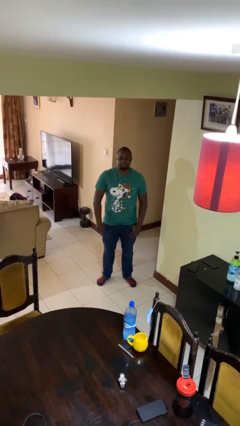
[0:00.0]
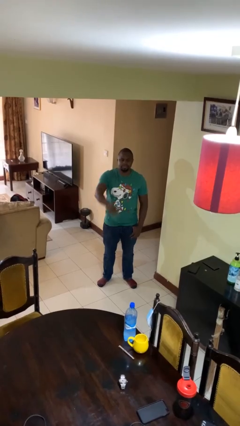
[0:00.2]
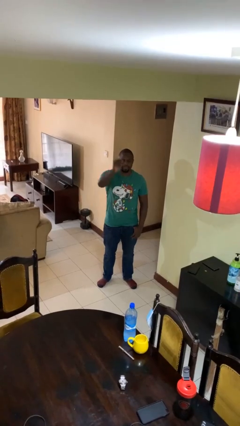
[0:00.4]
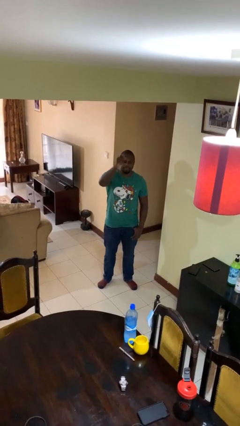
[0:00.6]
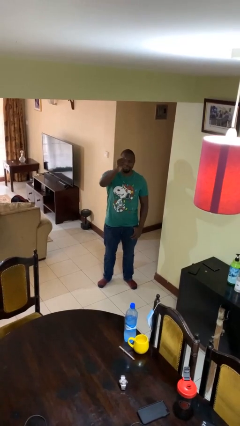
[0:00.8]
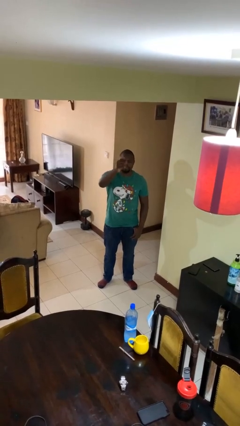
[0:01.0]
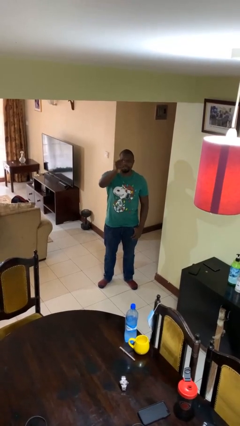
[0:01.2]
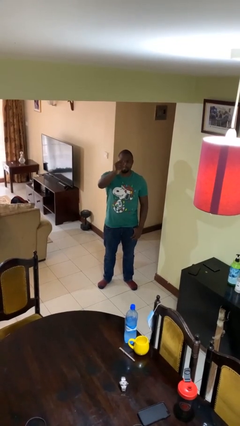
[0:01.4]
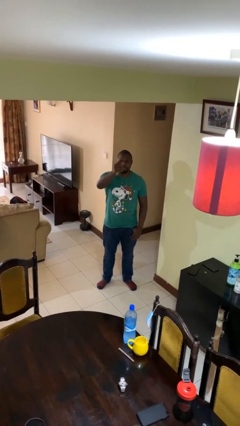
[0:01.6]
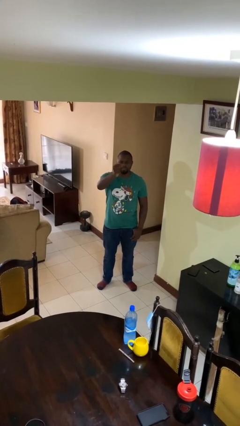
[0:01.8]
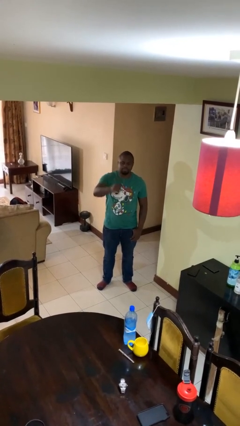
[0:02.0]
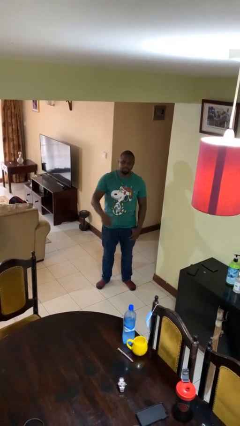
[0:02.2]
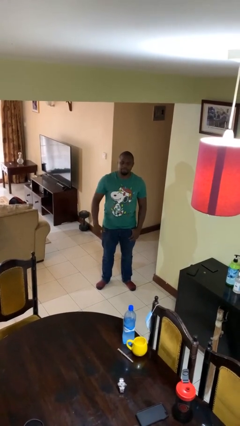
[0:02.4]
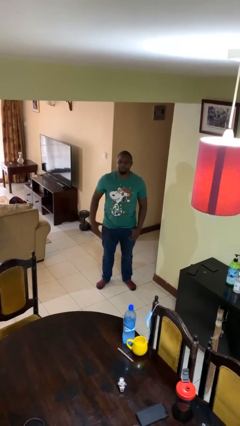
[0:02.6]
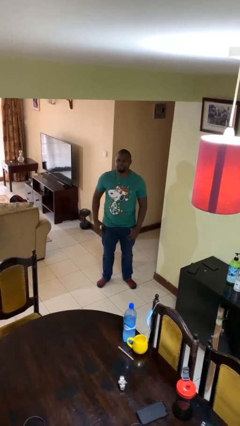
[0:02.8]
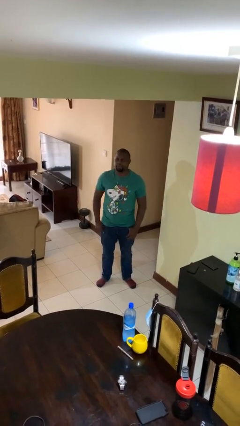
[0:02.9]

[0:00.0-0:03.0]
person snaps fingers

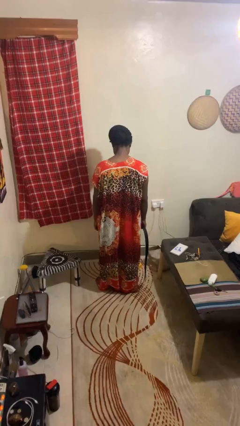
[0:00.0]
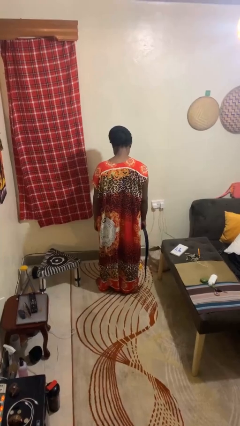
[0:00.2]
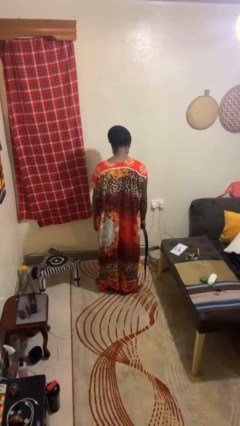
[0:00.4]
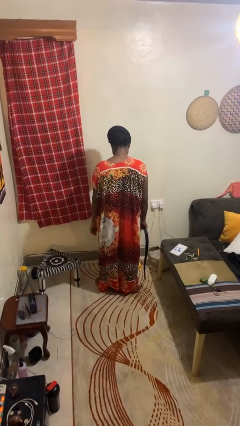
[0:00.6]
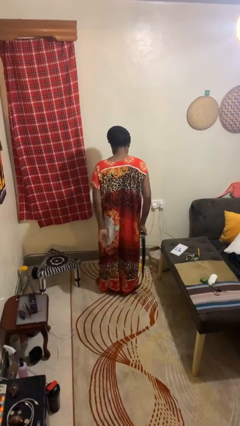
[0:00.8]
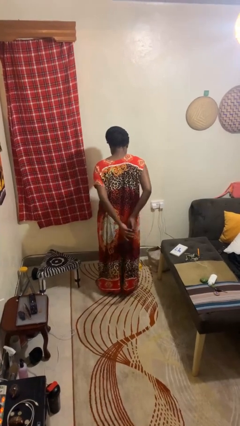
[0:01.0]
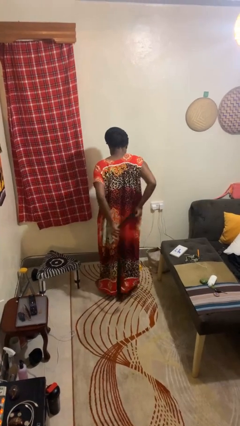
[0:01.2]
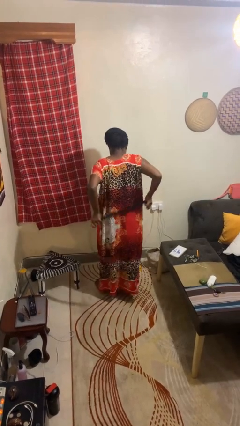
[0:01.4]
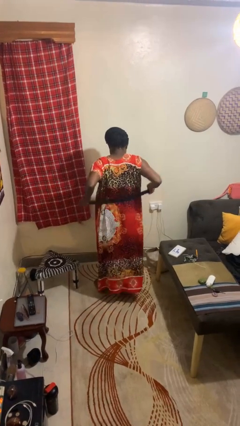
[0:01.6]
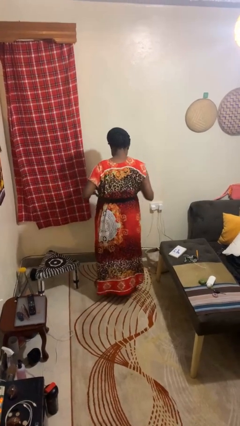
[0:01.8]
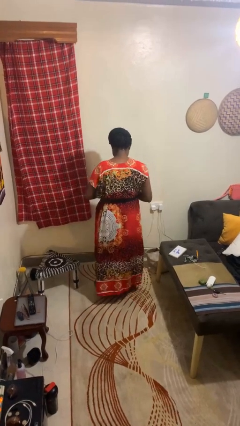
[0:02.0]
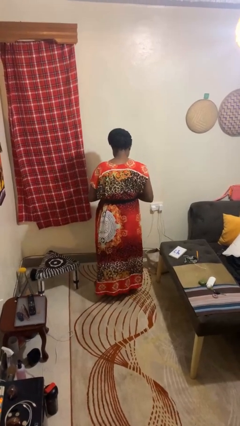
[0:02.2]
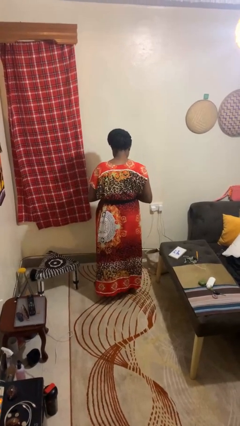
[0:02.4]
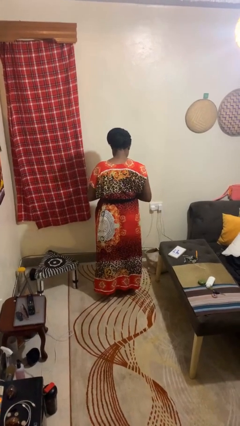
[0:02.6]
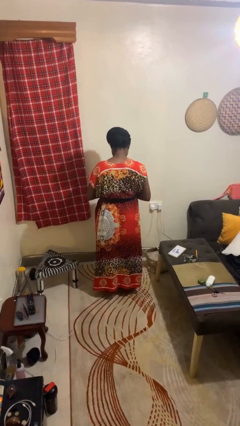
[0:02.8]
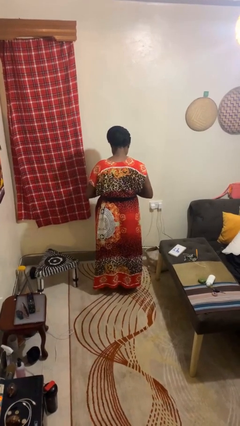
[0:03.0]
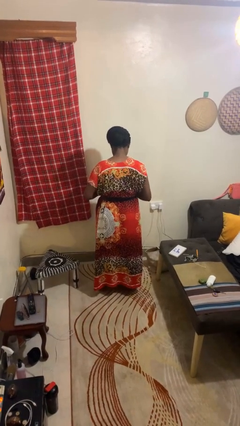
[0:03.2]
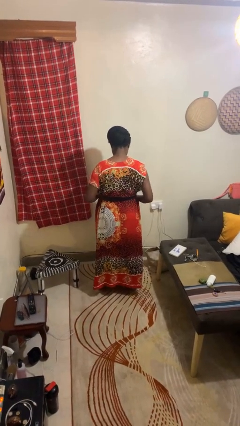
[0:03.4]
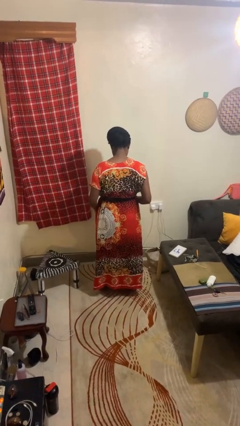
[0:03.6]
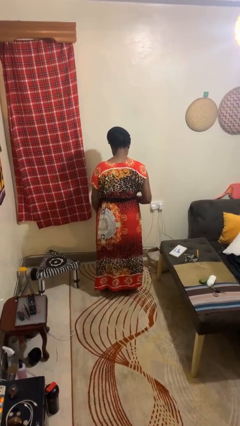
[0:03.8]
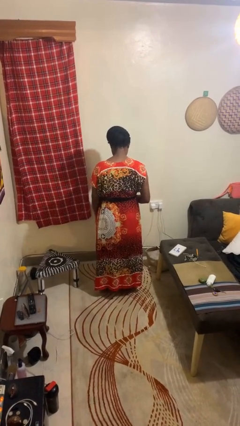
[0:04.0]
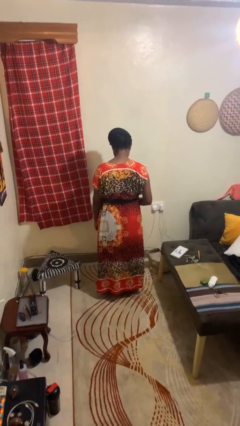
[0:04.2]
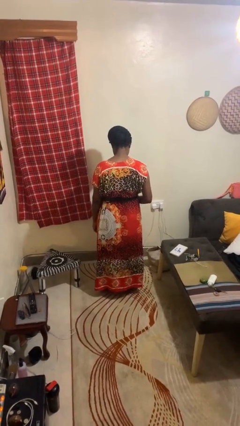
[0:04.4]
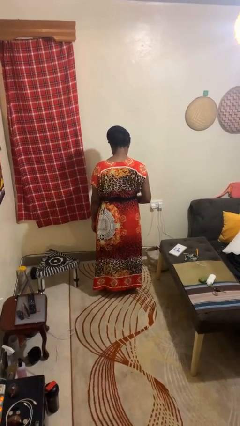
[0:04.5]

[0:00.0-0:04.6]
person puts on belt

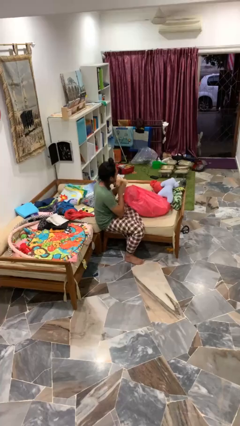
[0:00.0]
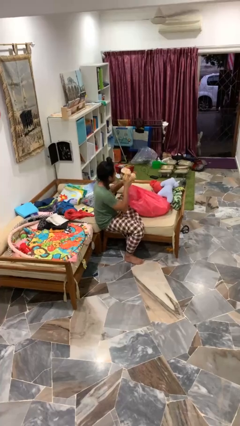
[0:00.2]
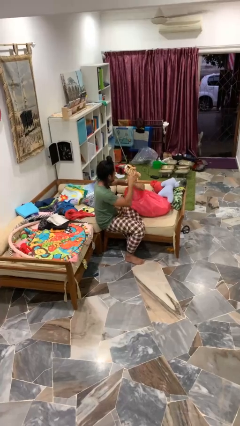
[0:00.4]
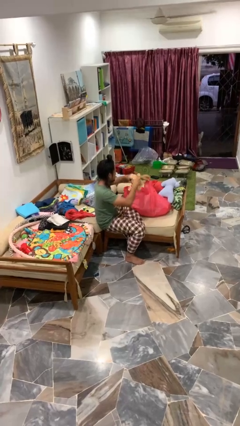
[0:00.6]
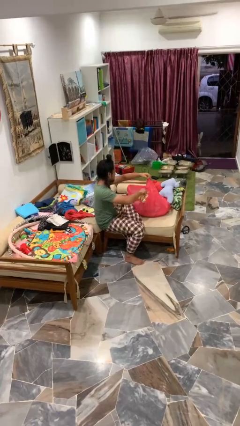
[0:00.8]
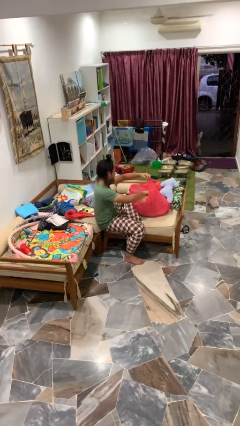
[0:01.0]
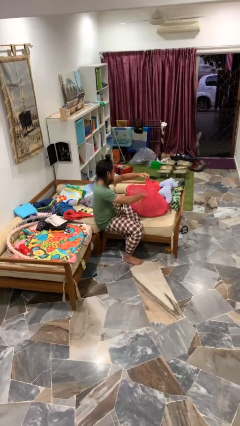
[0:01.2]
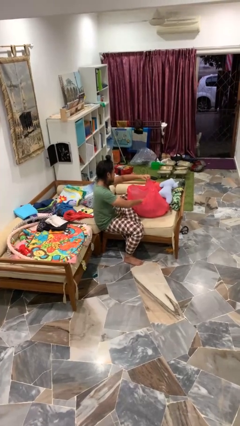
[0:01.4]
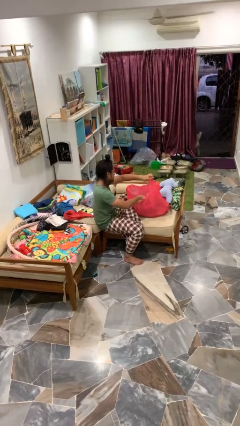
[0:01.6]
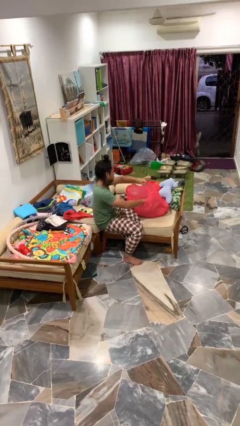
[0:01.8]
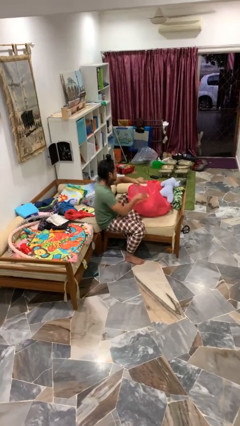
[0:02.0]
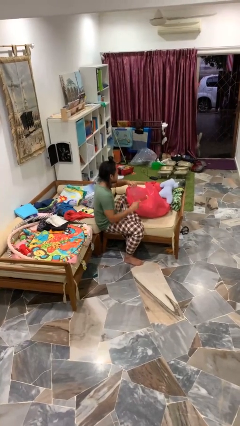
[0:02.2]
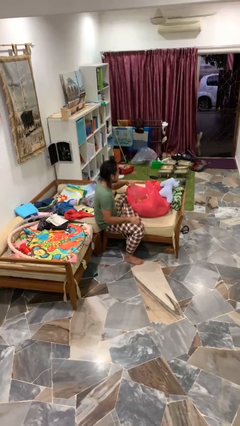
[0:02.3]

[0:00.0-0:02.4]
person puts object into bag

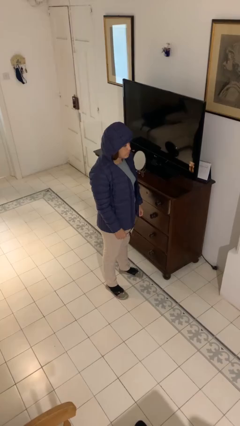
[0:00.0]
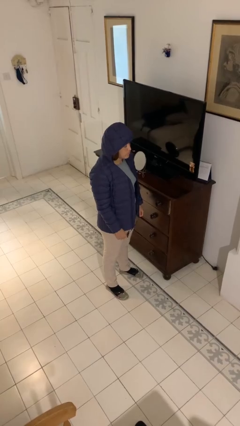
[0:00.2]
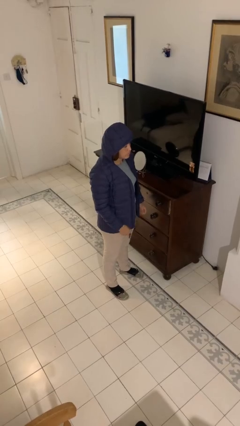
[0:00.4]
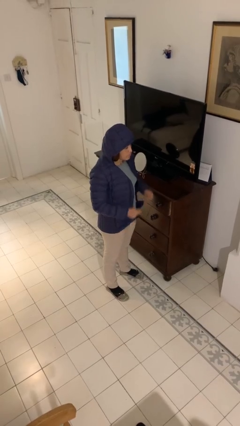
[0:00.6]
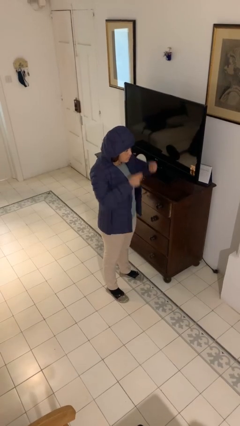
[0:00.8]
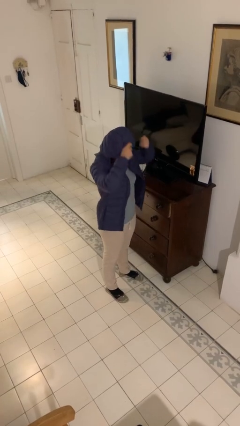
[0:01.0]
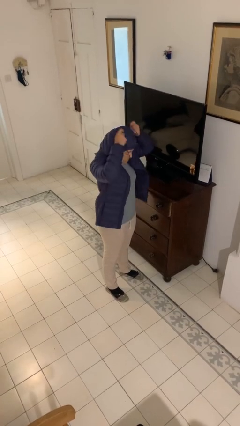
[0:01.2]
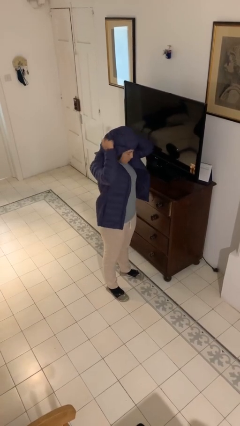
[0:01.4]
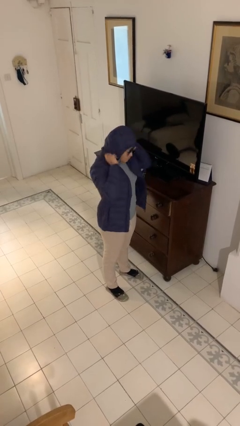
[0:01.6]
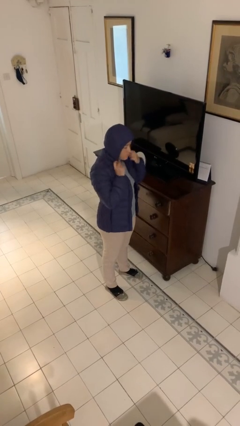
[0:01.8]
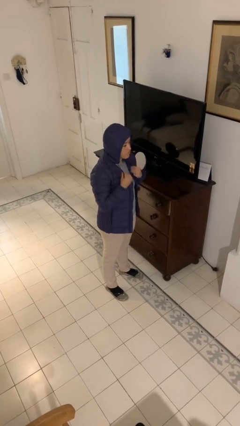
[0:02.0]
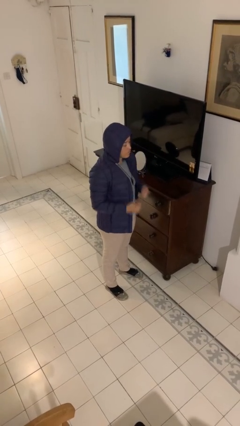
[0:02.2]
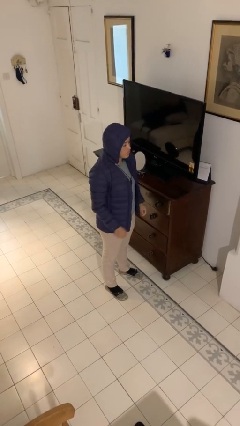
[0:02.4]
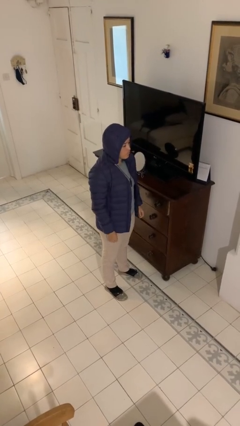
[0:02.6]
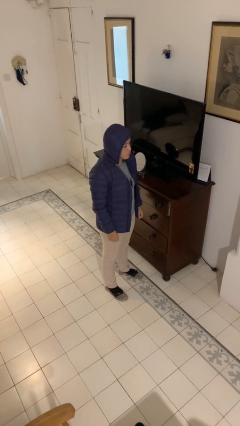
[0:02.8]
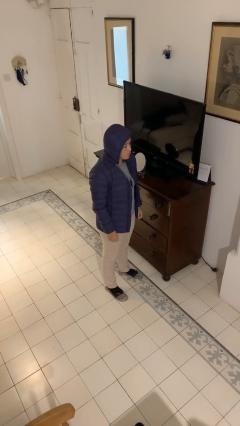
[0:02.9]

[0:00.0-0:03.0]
person puts on necklace

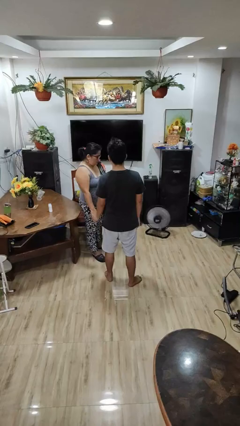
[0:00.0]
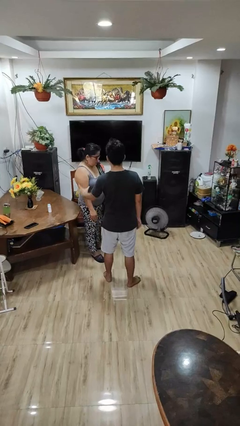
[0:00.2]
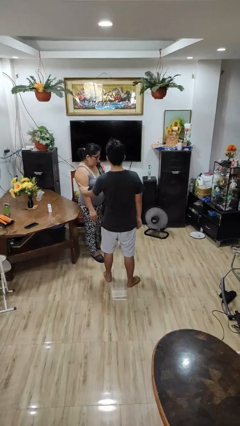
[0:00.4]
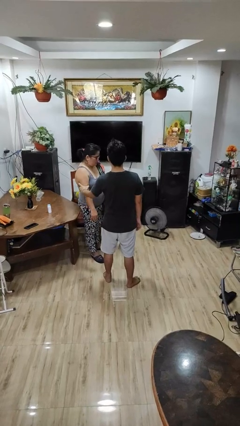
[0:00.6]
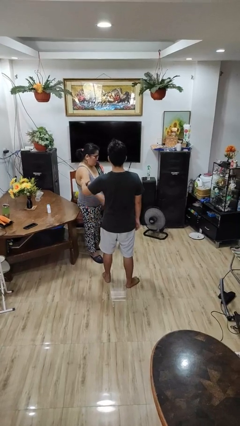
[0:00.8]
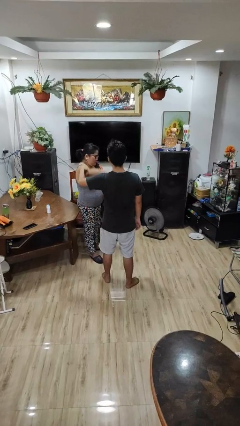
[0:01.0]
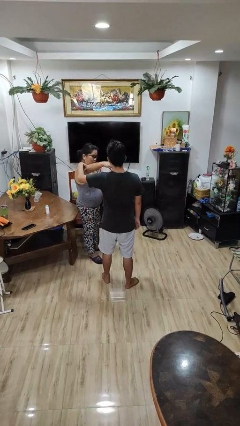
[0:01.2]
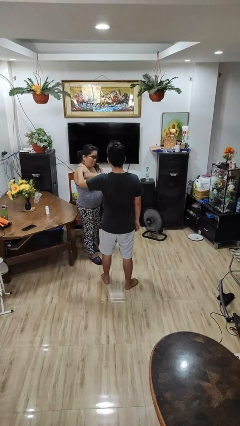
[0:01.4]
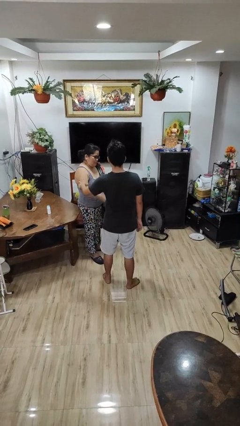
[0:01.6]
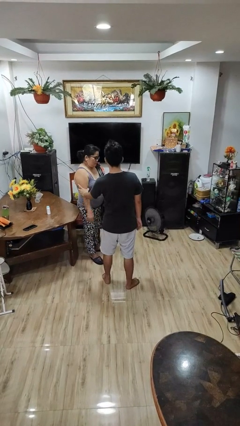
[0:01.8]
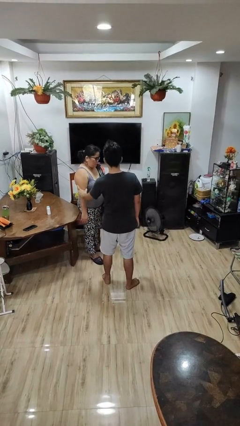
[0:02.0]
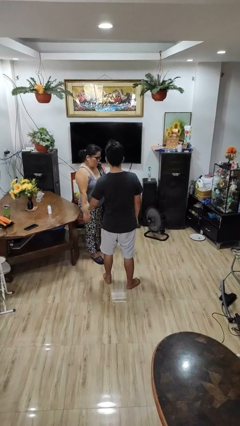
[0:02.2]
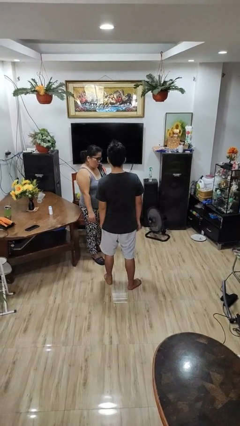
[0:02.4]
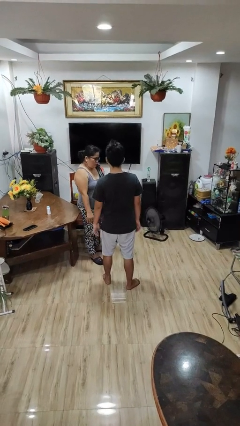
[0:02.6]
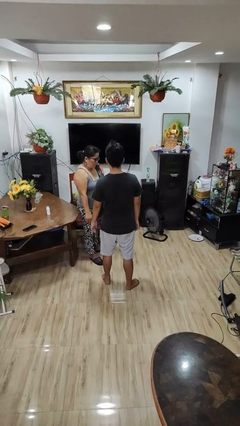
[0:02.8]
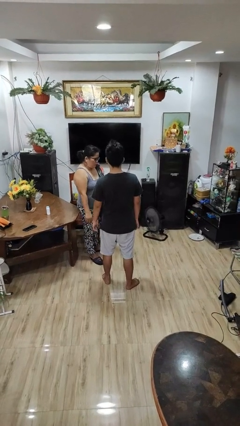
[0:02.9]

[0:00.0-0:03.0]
person grabs person by bicep

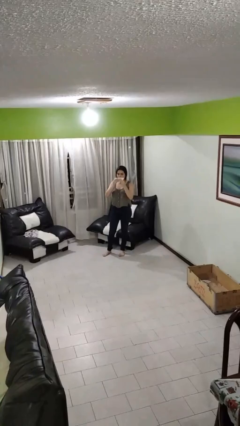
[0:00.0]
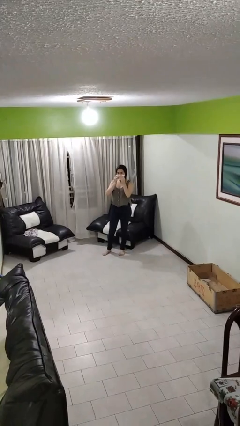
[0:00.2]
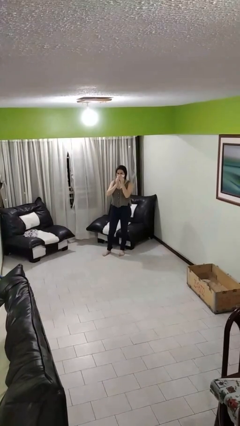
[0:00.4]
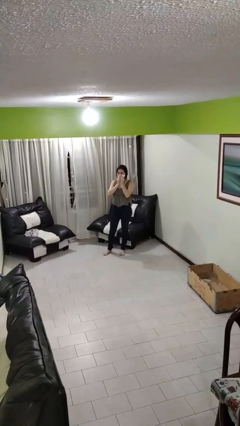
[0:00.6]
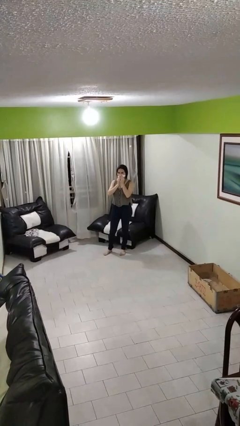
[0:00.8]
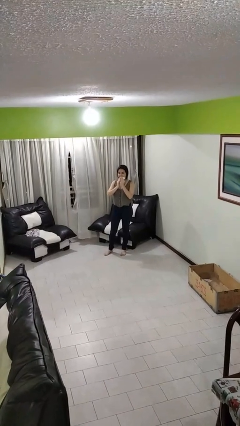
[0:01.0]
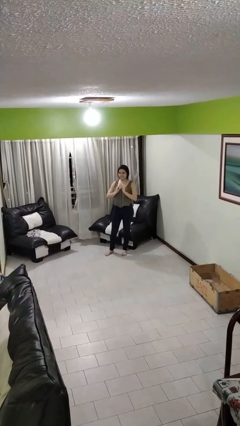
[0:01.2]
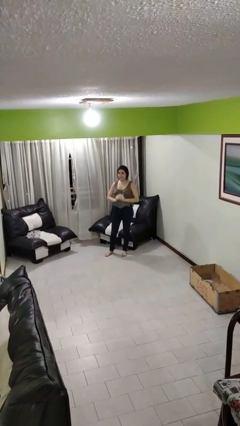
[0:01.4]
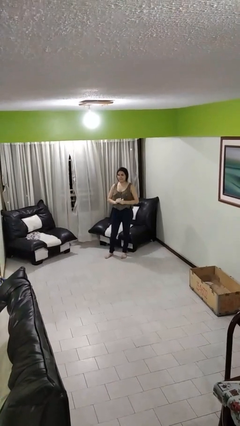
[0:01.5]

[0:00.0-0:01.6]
person wipes mouth with napkin

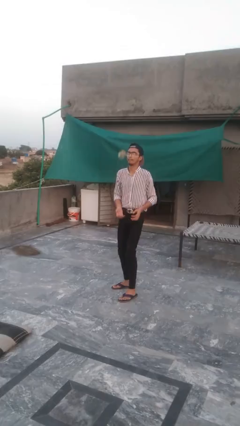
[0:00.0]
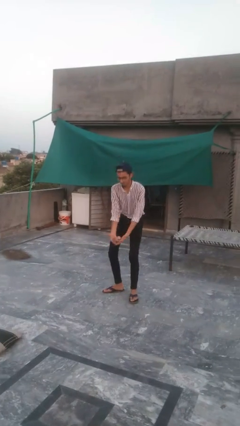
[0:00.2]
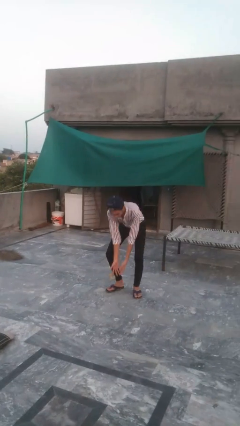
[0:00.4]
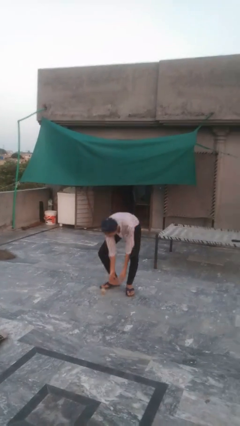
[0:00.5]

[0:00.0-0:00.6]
person catches dropped object
